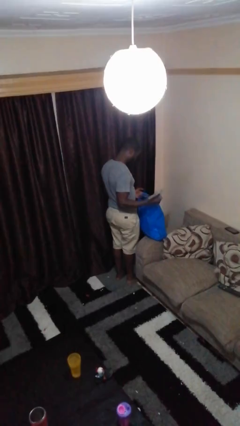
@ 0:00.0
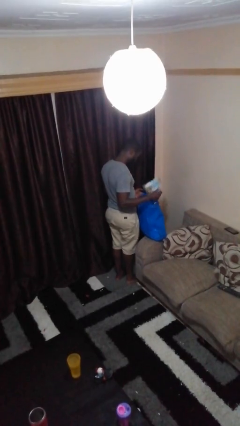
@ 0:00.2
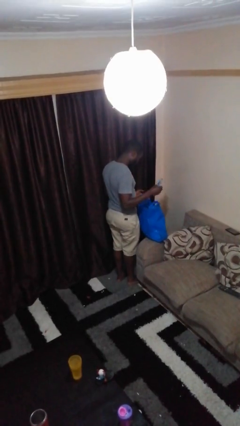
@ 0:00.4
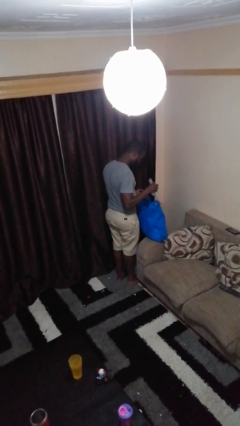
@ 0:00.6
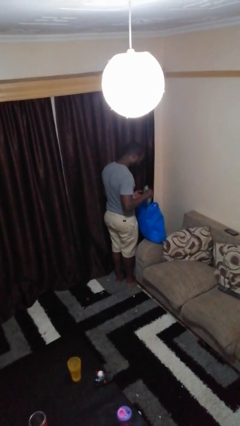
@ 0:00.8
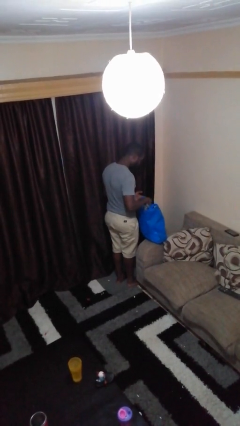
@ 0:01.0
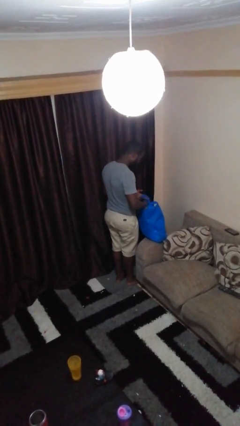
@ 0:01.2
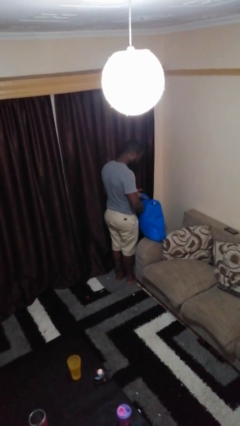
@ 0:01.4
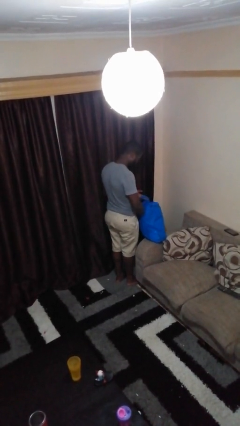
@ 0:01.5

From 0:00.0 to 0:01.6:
person puts object into bag

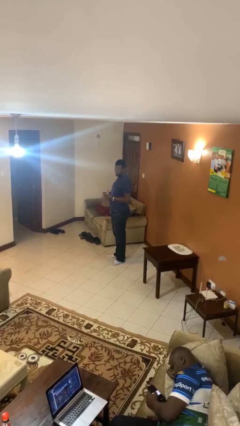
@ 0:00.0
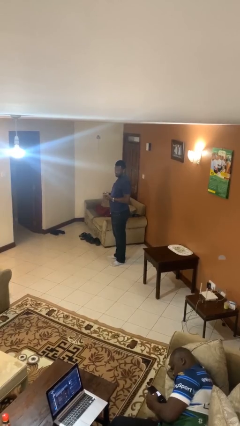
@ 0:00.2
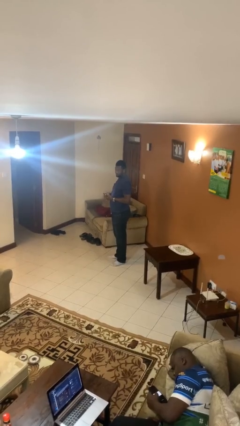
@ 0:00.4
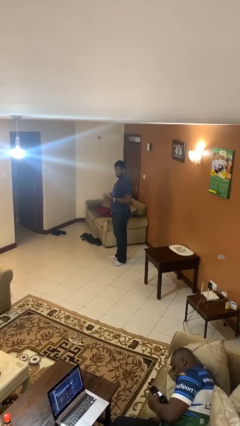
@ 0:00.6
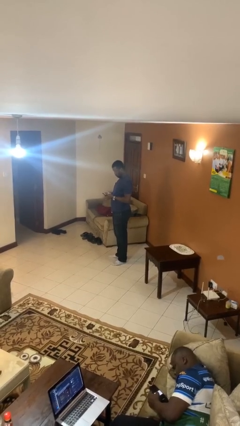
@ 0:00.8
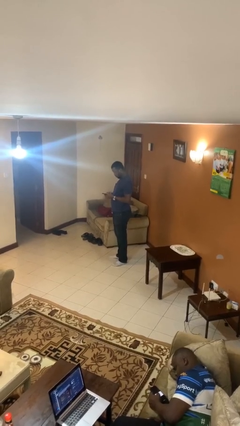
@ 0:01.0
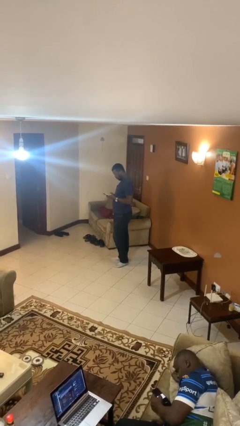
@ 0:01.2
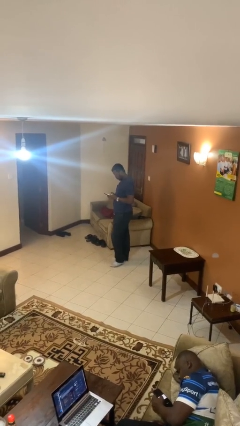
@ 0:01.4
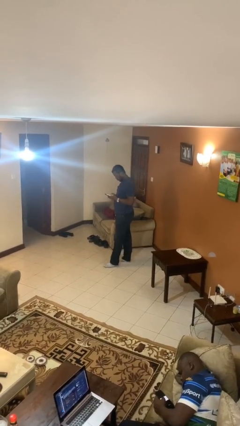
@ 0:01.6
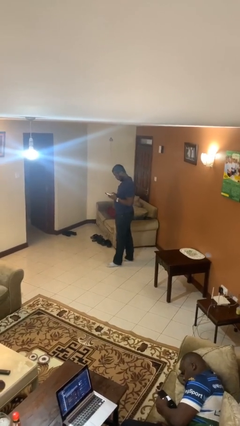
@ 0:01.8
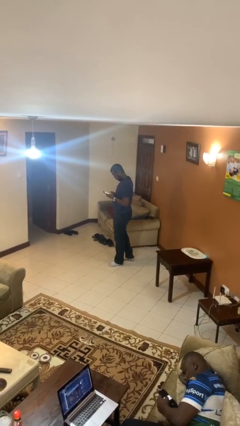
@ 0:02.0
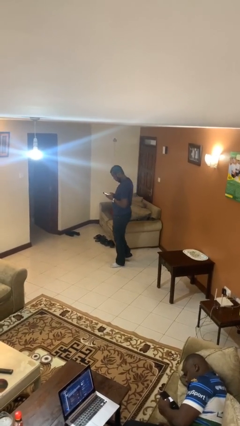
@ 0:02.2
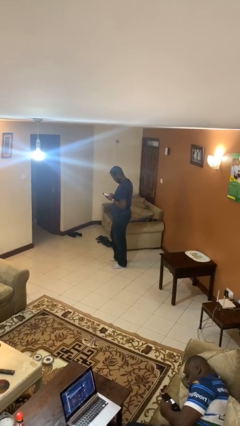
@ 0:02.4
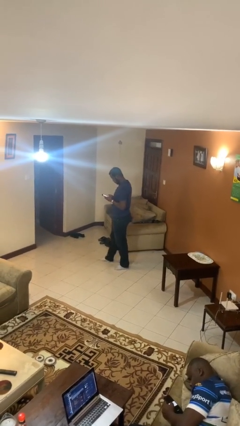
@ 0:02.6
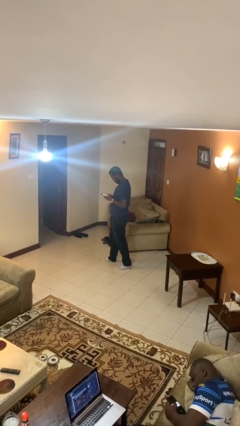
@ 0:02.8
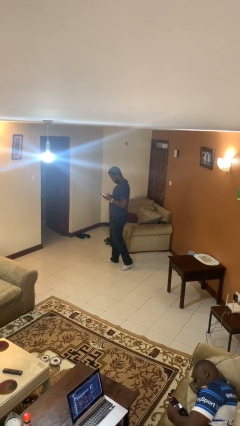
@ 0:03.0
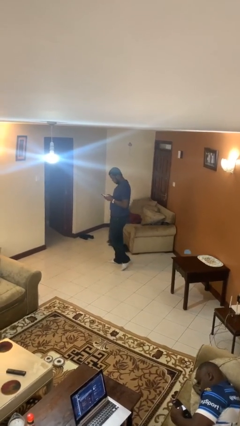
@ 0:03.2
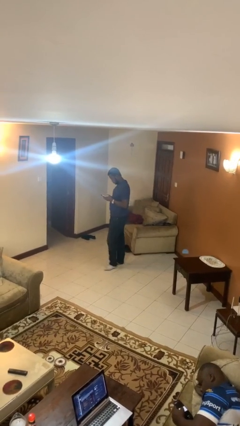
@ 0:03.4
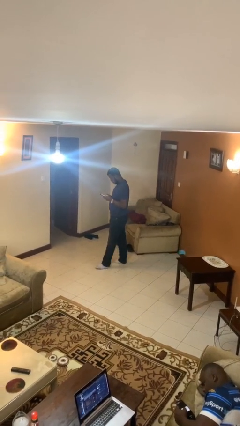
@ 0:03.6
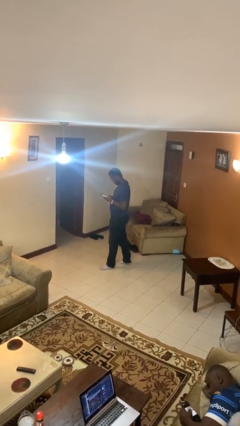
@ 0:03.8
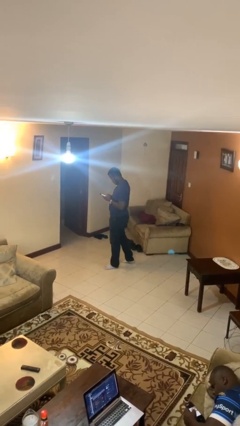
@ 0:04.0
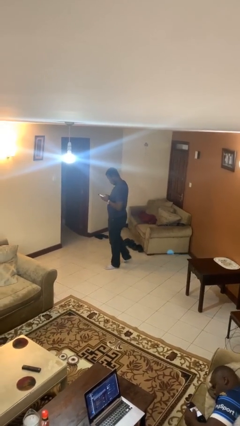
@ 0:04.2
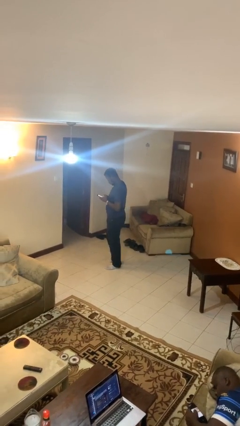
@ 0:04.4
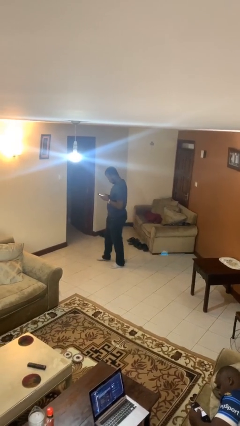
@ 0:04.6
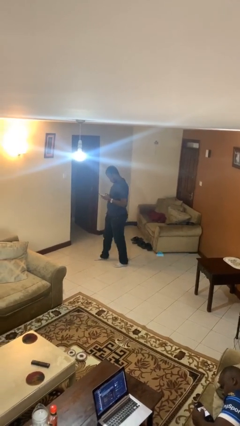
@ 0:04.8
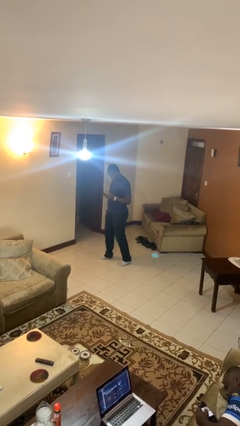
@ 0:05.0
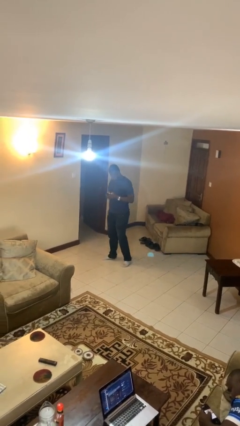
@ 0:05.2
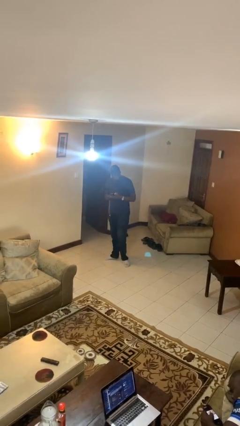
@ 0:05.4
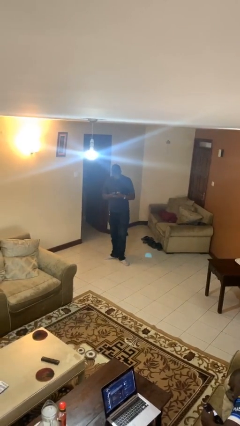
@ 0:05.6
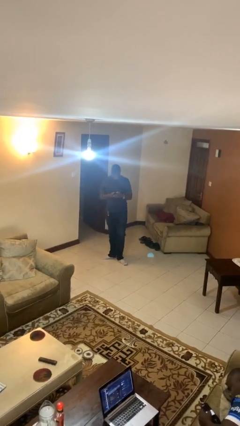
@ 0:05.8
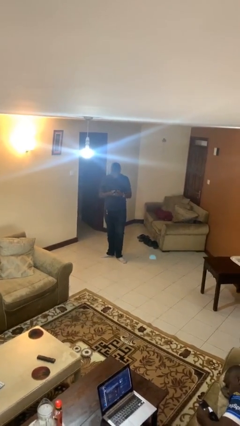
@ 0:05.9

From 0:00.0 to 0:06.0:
person texts on phone

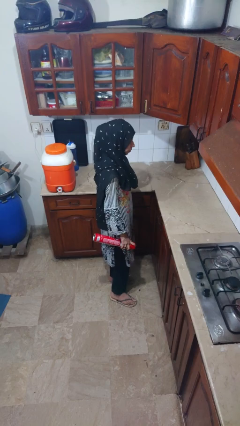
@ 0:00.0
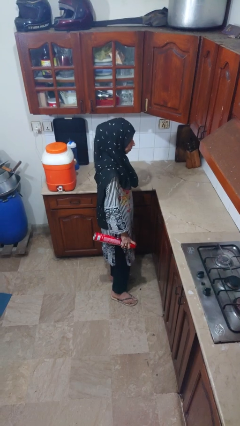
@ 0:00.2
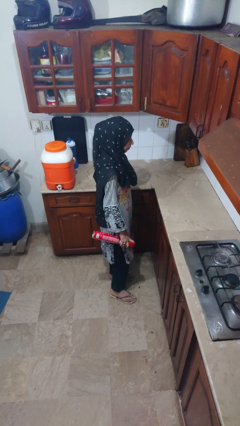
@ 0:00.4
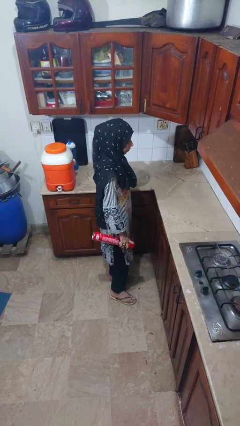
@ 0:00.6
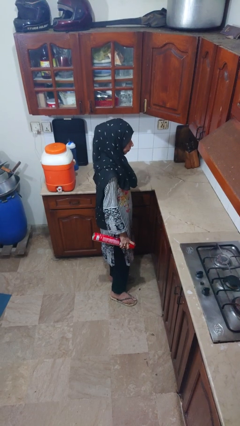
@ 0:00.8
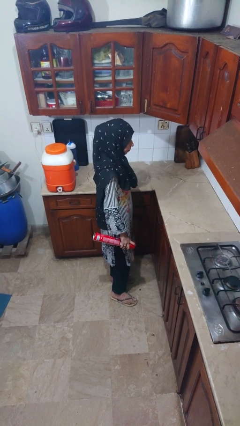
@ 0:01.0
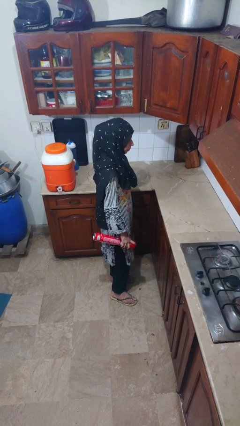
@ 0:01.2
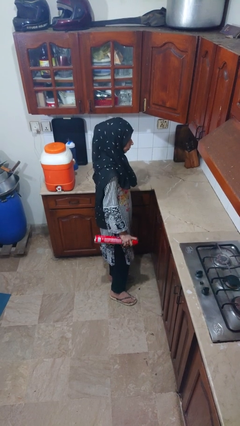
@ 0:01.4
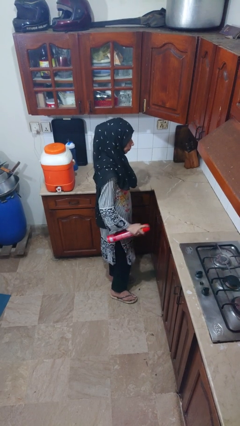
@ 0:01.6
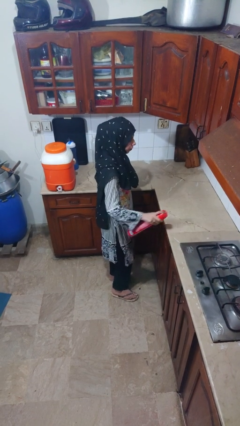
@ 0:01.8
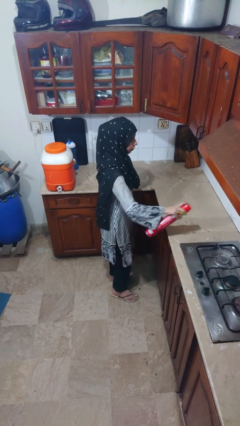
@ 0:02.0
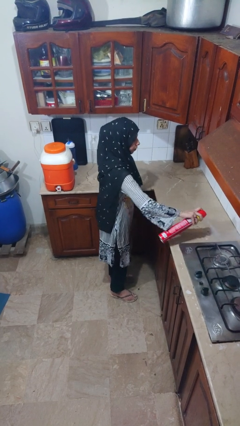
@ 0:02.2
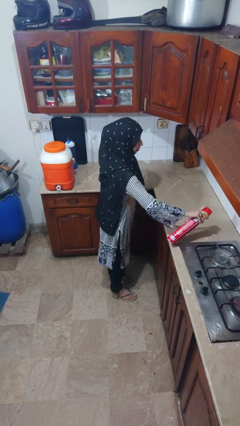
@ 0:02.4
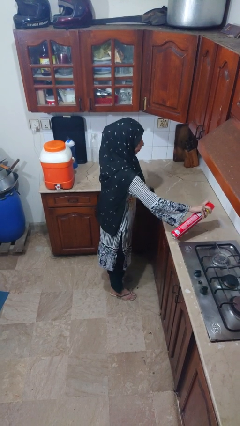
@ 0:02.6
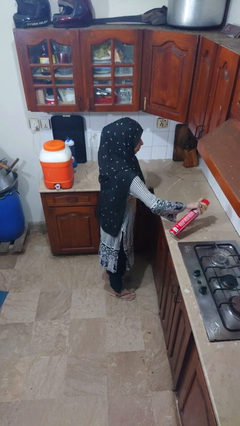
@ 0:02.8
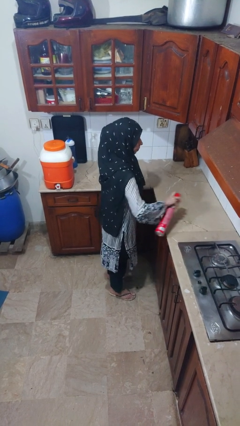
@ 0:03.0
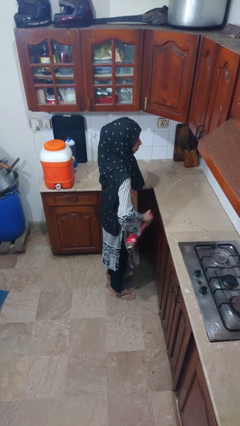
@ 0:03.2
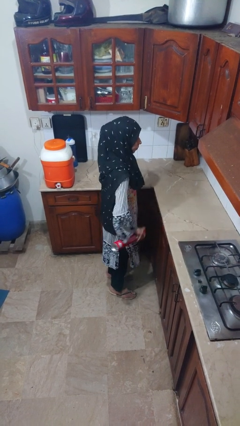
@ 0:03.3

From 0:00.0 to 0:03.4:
person sprays from bottle

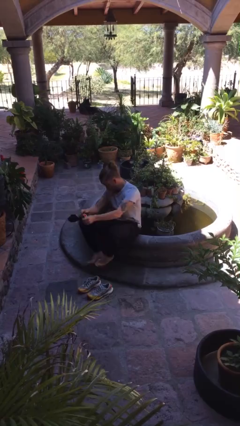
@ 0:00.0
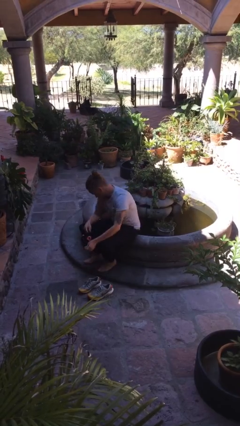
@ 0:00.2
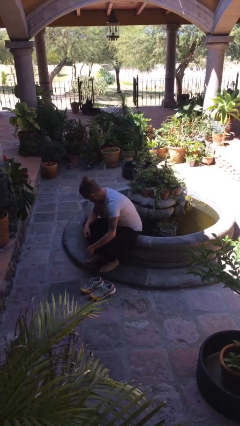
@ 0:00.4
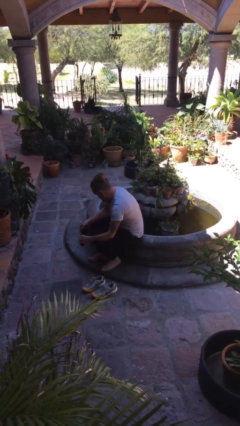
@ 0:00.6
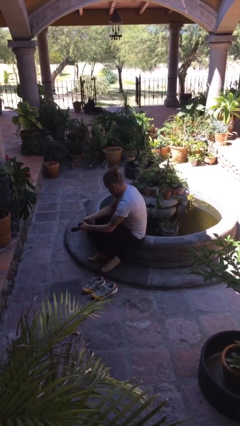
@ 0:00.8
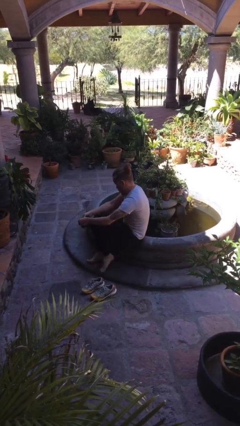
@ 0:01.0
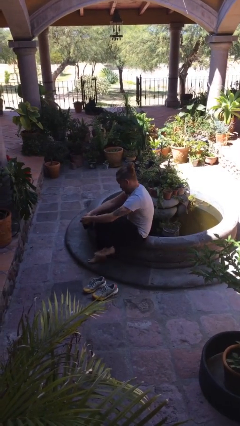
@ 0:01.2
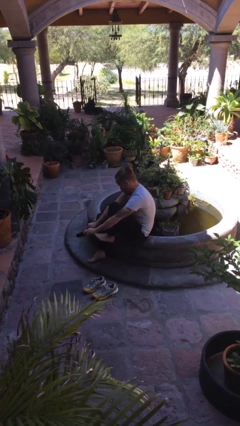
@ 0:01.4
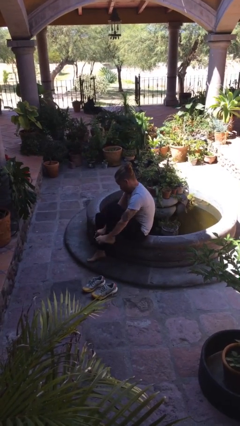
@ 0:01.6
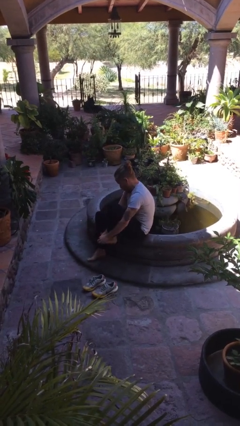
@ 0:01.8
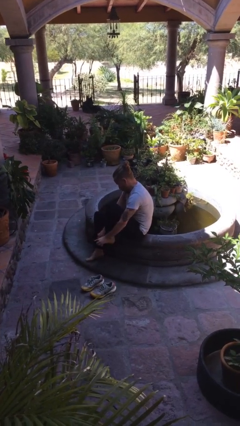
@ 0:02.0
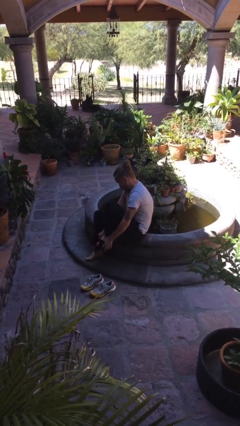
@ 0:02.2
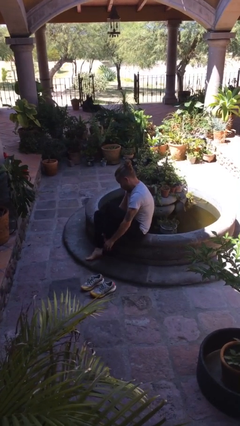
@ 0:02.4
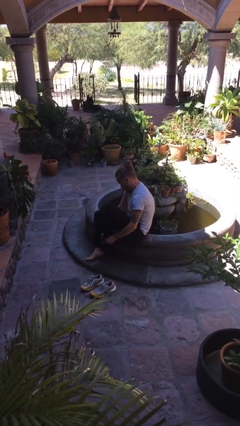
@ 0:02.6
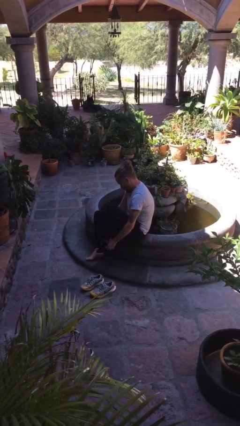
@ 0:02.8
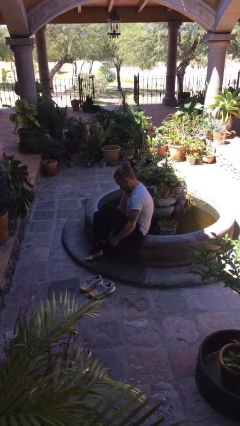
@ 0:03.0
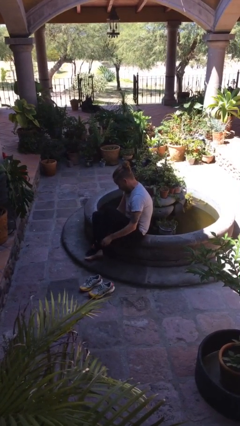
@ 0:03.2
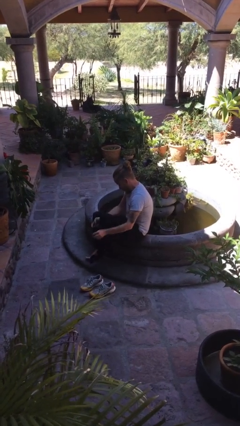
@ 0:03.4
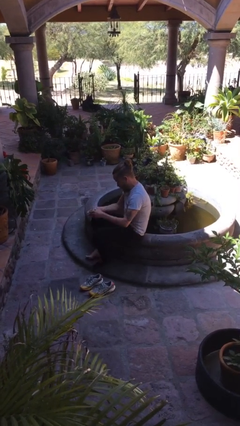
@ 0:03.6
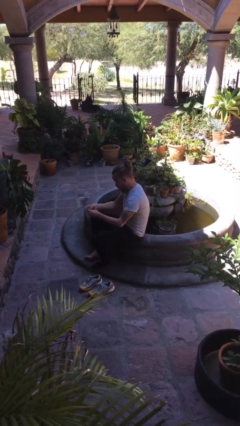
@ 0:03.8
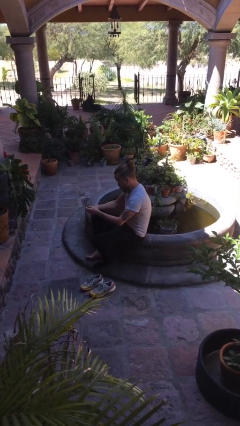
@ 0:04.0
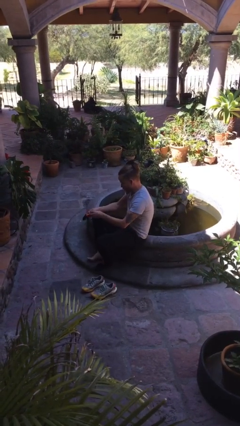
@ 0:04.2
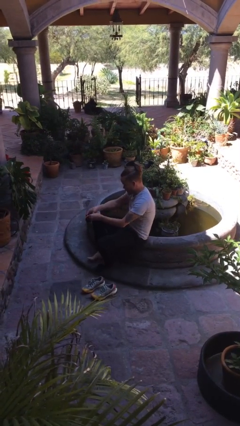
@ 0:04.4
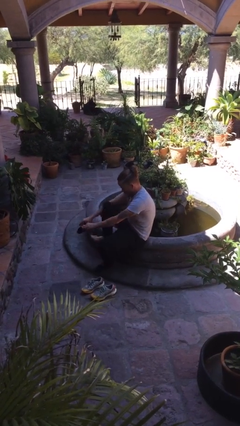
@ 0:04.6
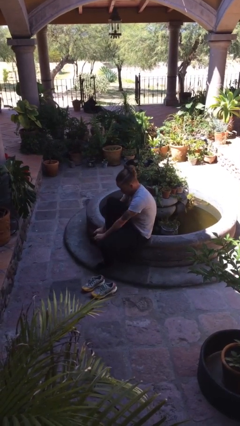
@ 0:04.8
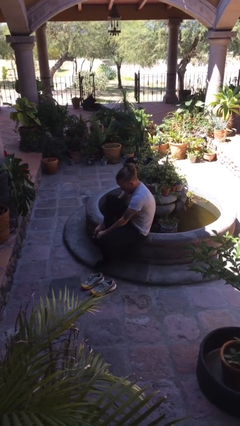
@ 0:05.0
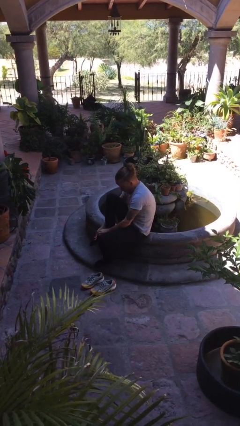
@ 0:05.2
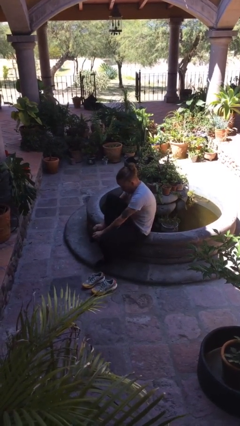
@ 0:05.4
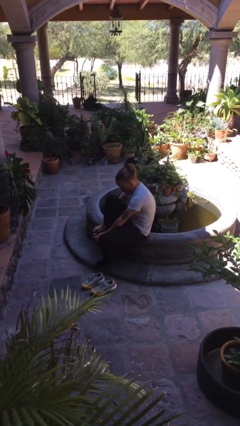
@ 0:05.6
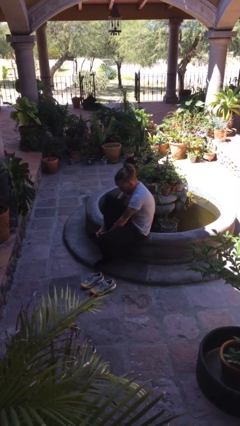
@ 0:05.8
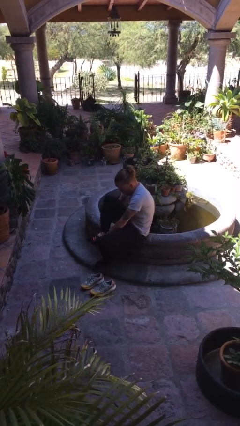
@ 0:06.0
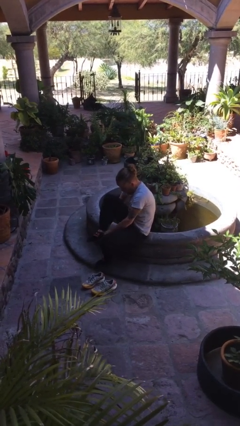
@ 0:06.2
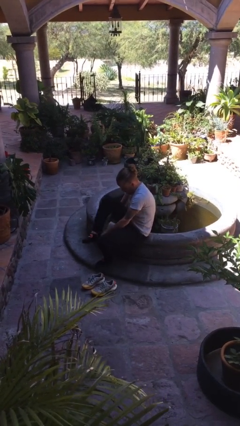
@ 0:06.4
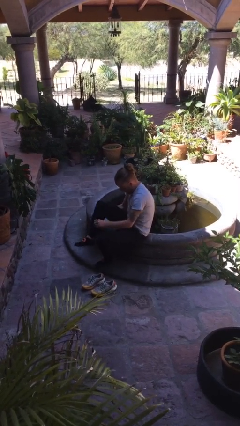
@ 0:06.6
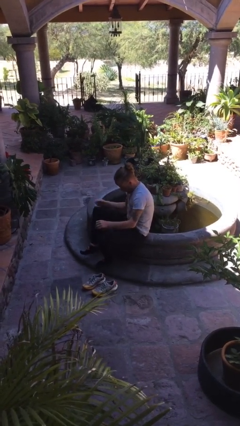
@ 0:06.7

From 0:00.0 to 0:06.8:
person puts on socks
